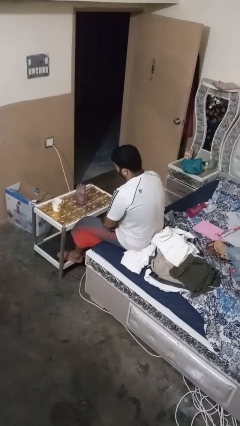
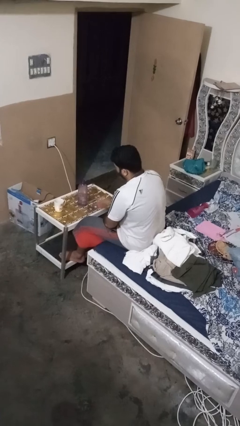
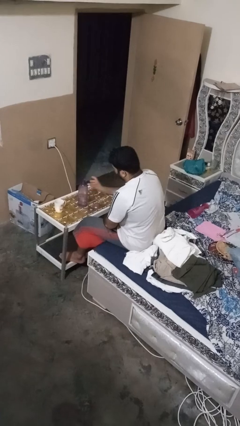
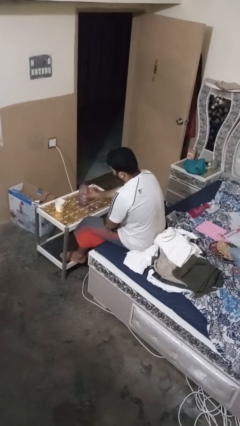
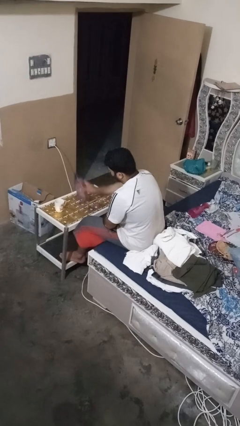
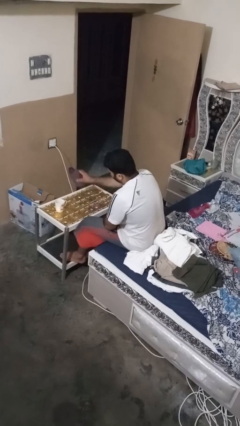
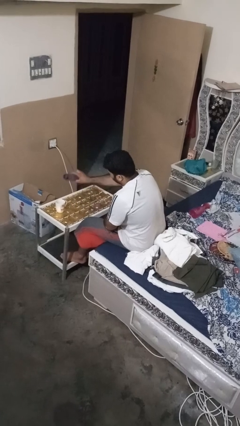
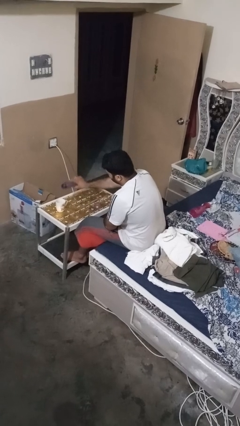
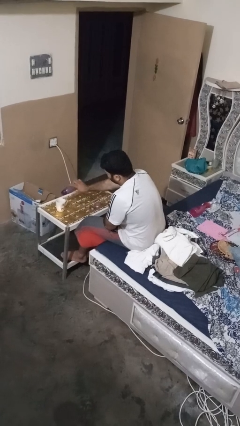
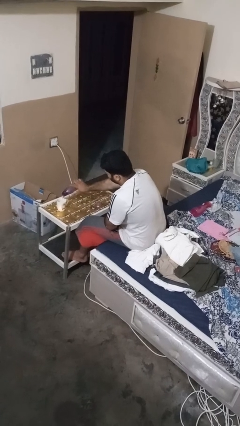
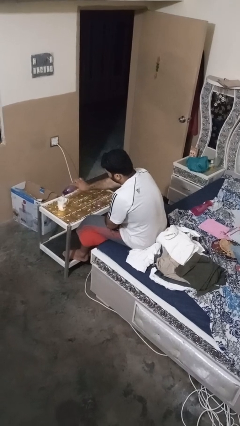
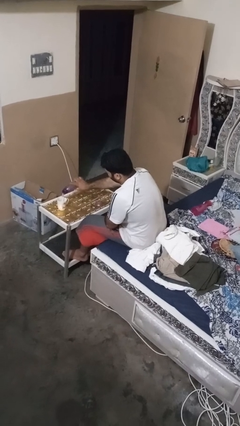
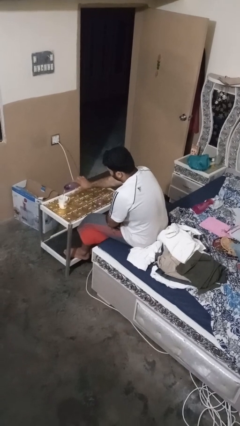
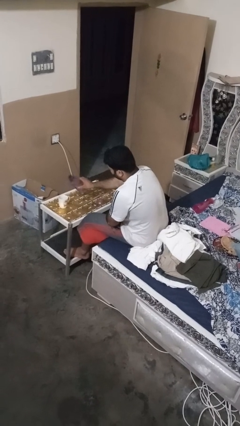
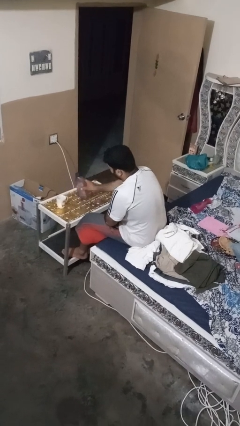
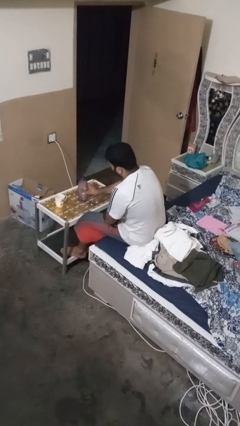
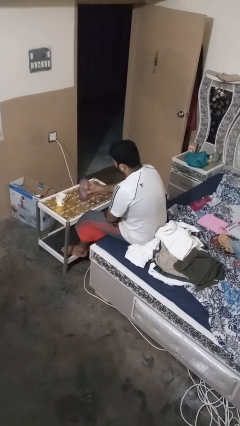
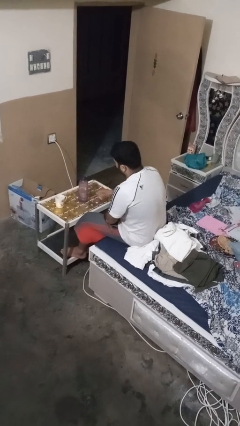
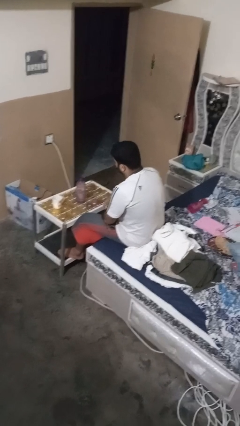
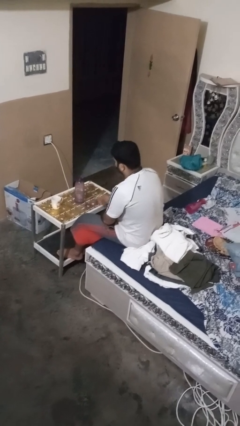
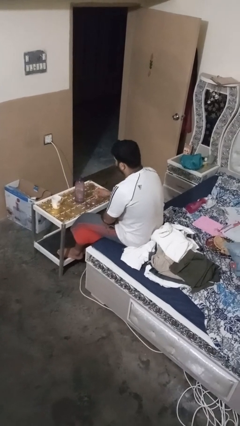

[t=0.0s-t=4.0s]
person pours liquid into cup

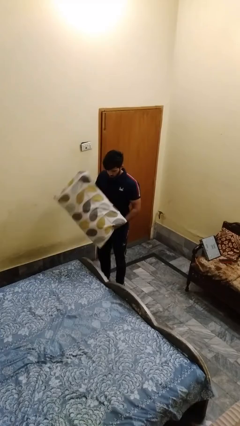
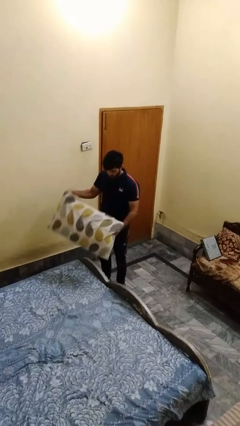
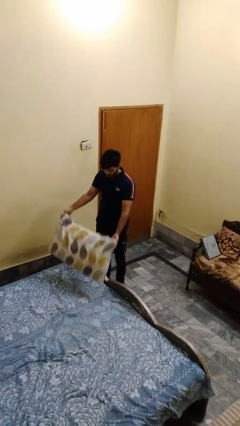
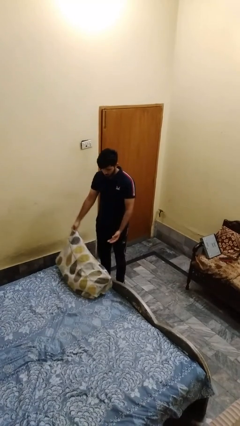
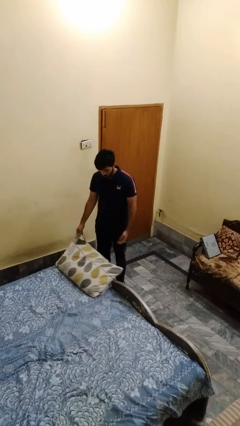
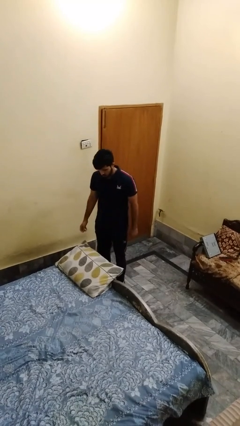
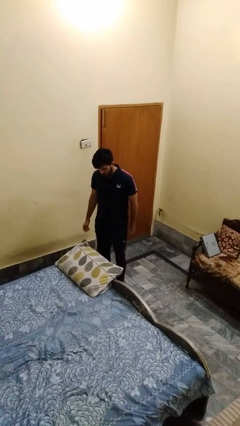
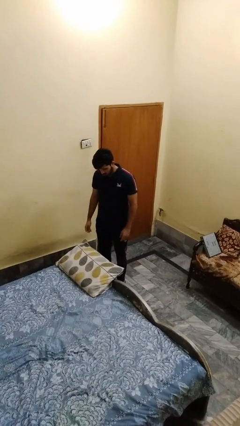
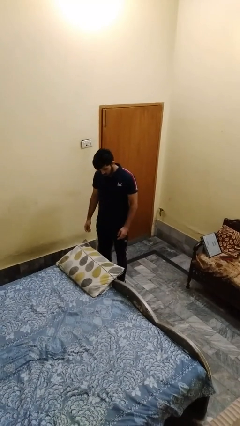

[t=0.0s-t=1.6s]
person puts down object on bed

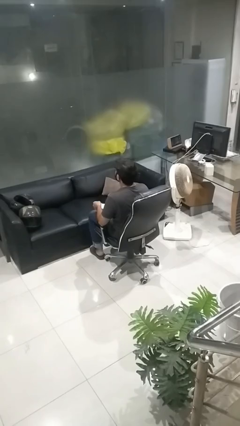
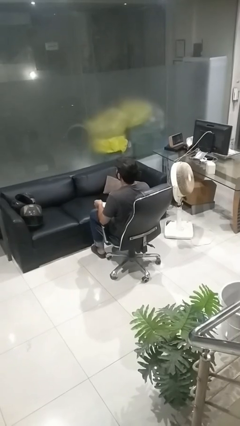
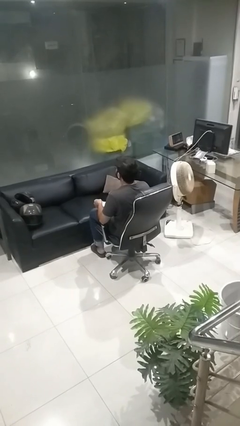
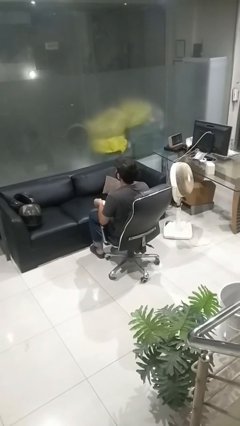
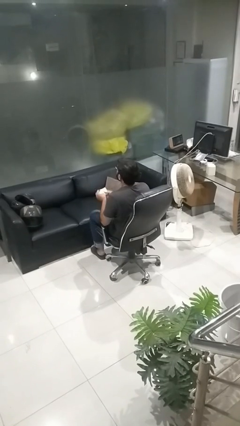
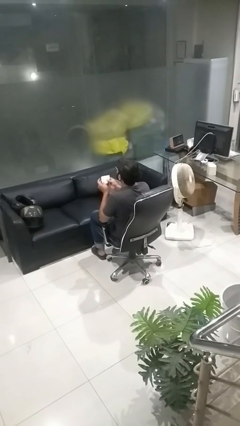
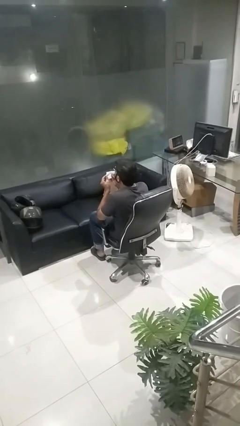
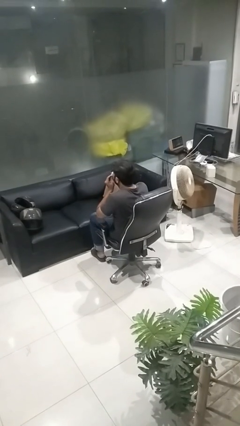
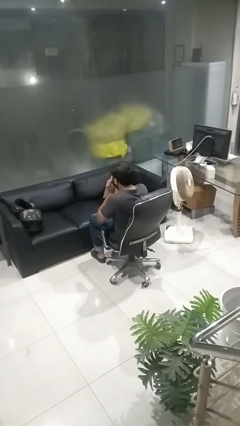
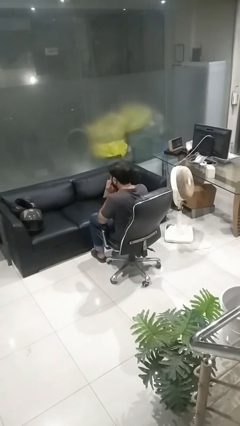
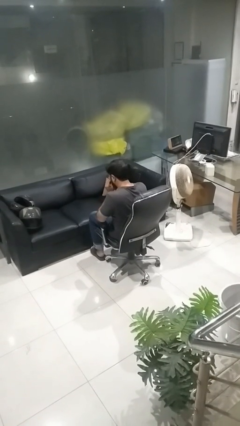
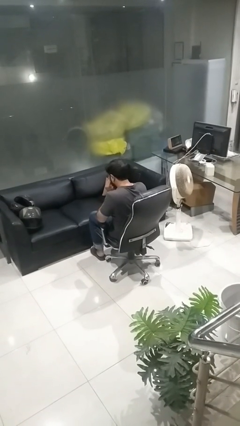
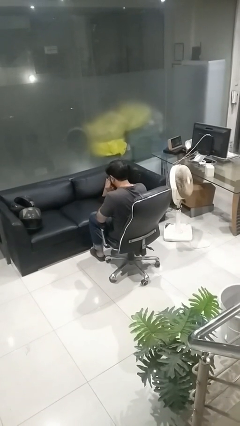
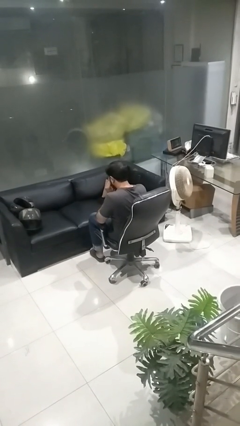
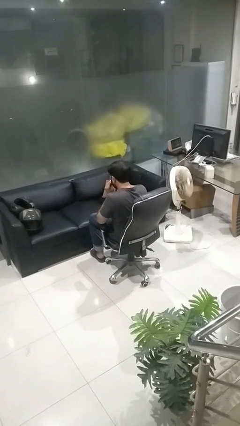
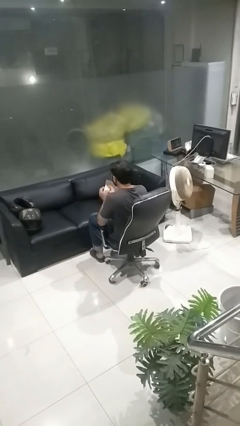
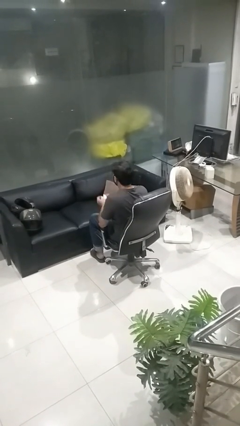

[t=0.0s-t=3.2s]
person blows nose

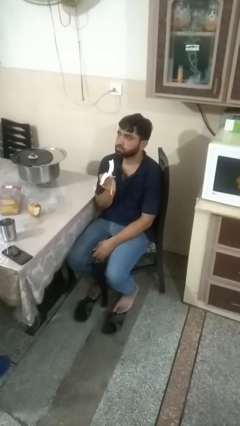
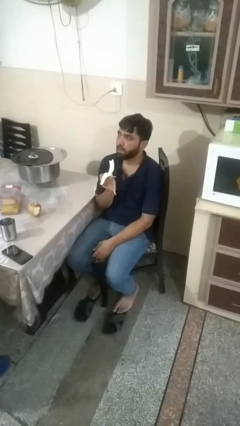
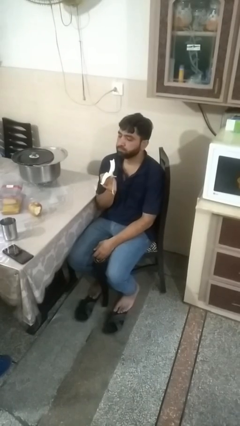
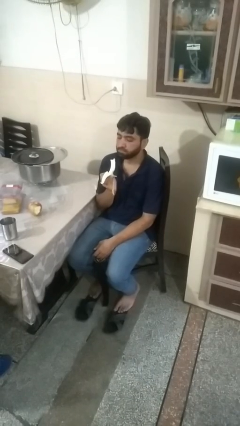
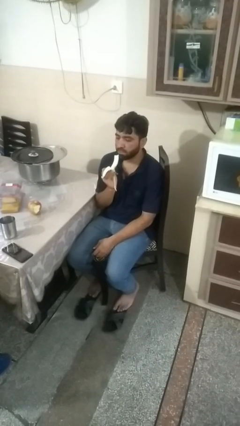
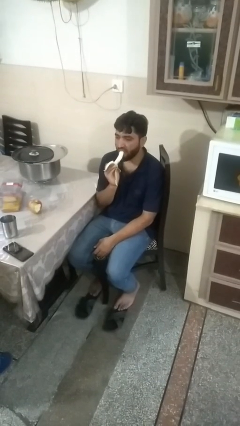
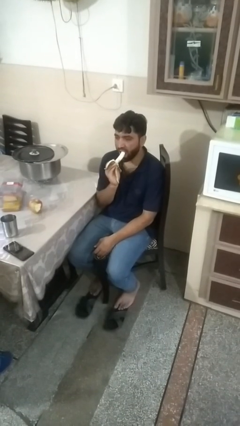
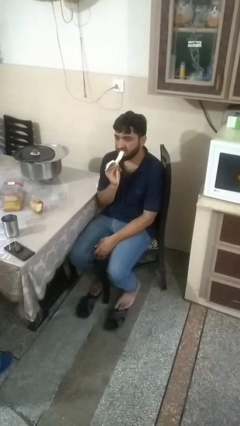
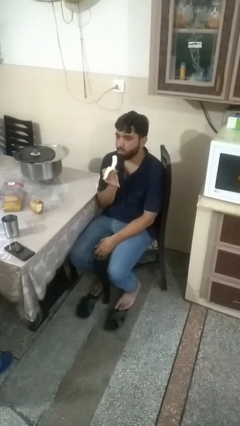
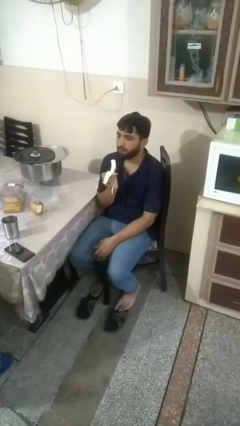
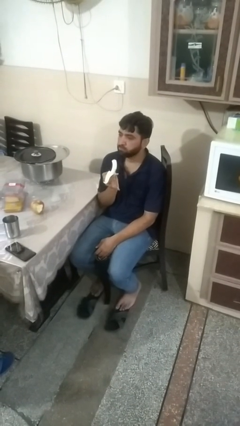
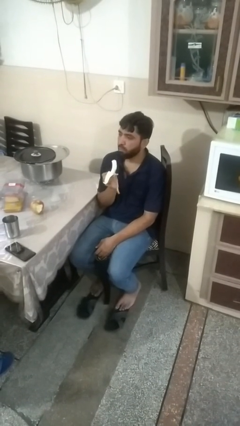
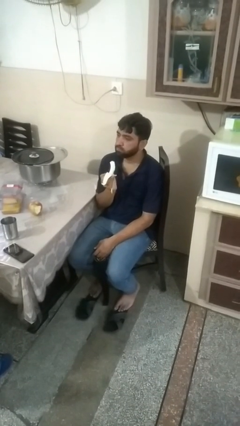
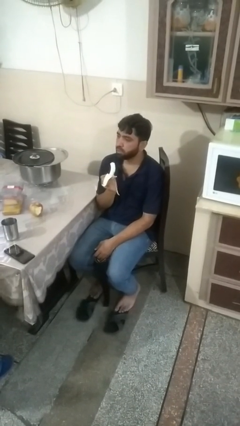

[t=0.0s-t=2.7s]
person eats banana

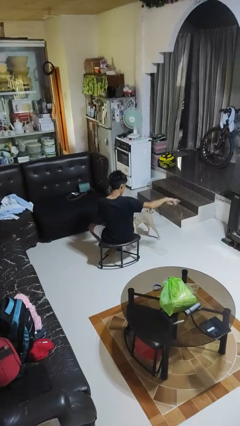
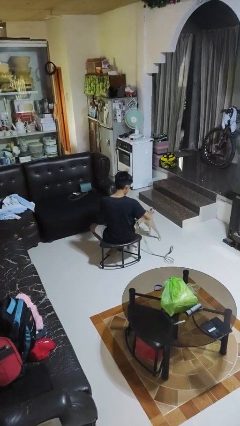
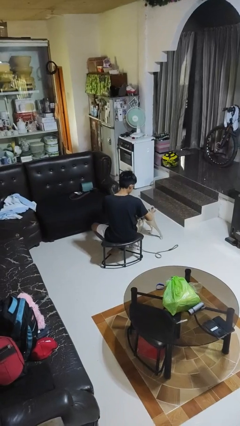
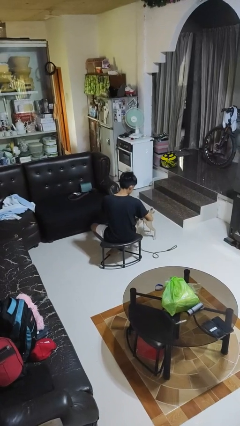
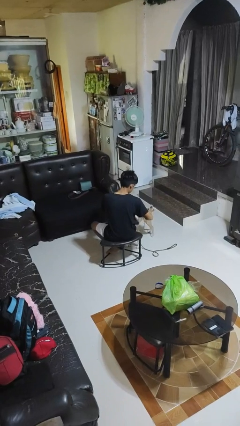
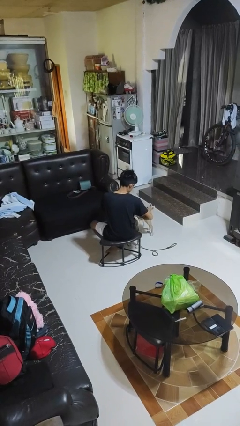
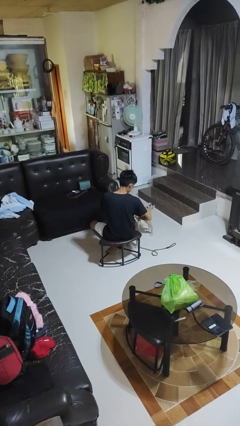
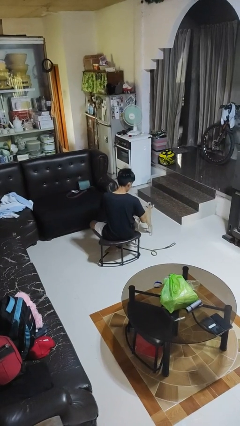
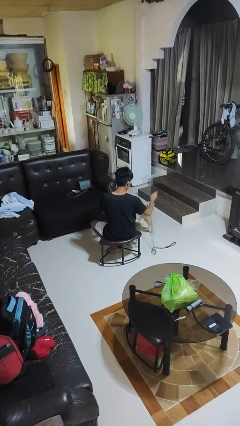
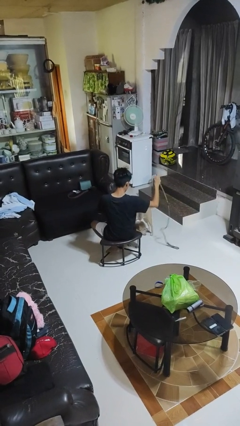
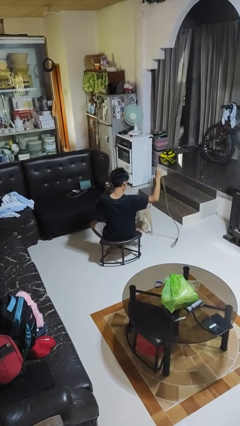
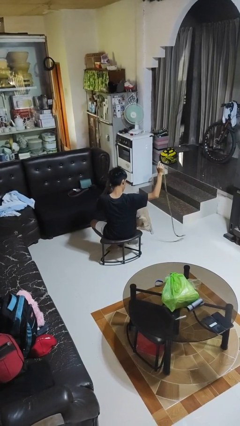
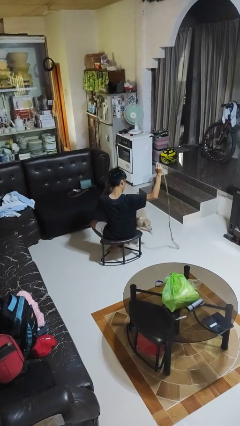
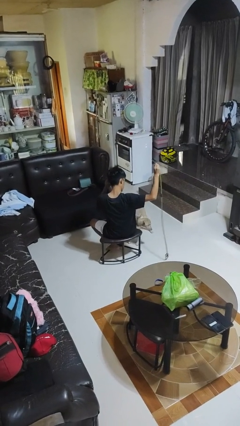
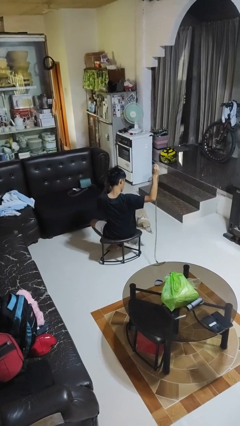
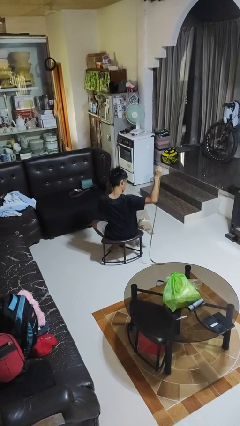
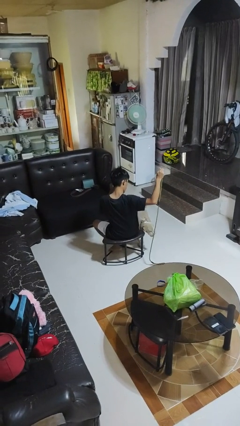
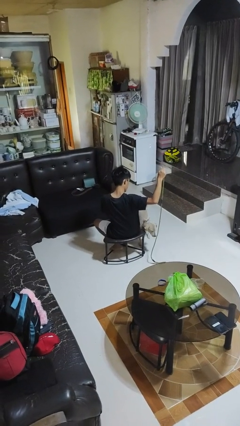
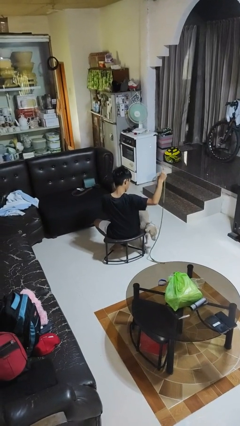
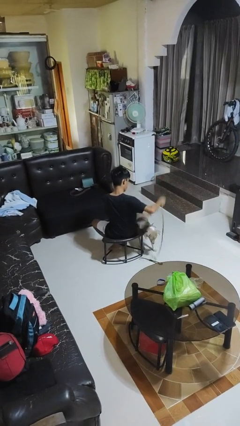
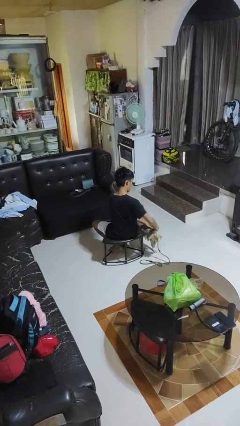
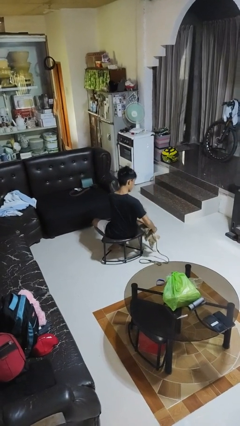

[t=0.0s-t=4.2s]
person unattaches leash from dog

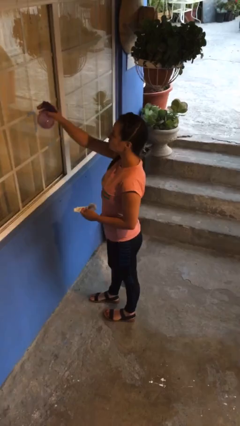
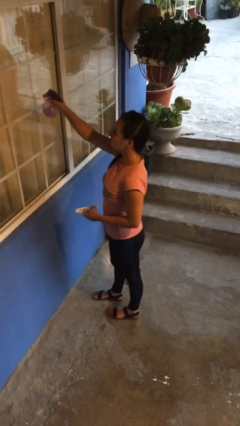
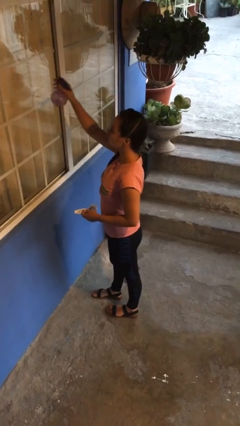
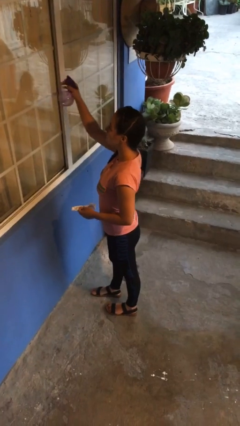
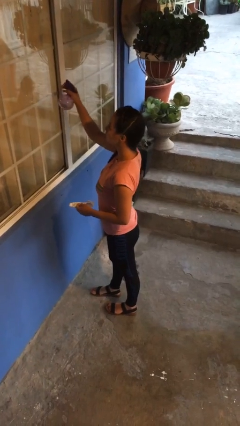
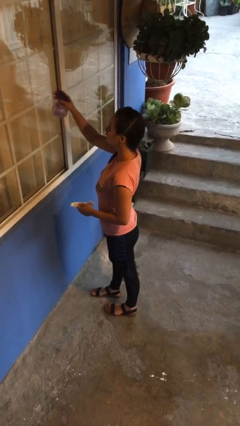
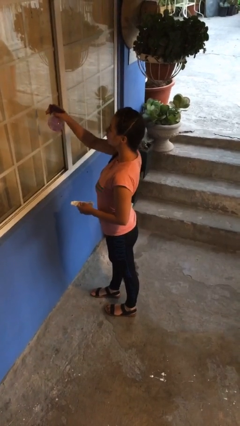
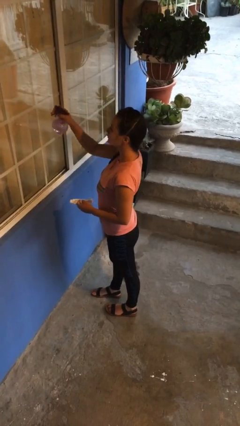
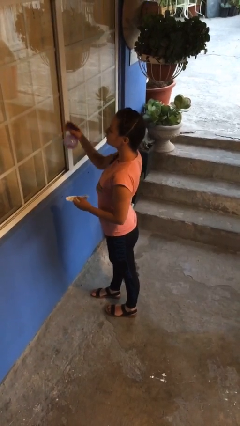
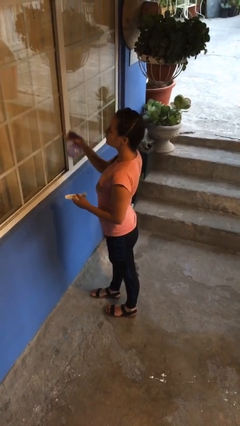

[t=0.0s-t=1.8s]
person sprays from bottle
